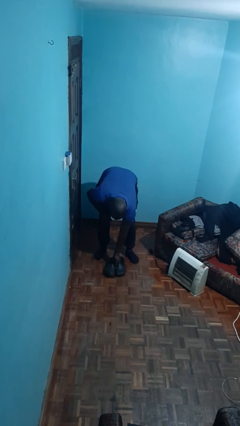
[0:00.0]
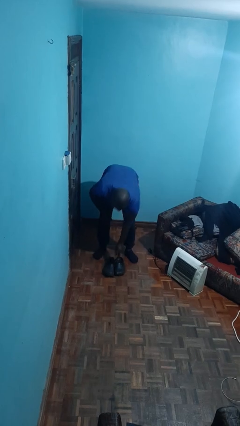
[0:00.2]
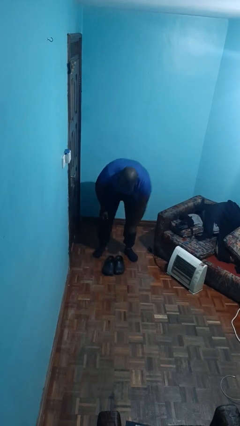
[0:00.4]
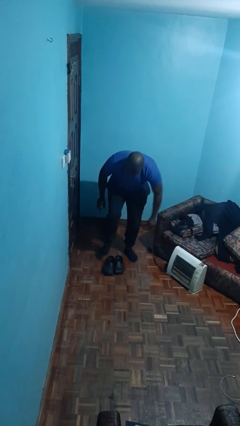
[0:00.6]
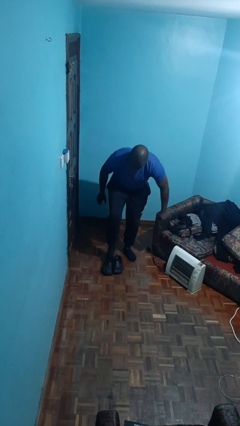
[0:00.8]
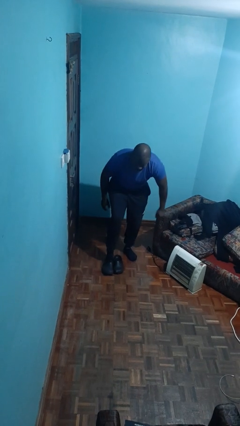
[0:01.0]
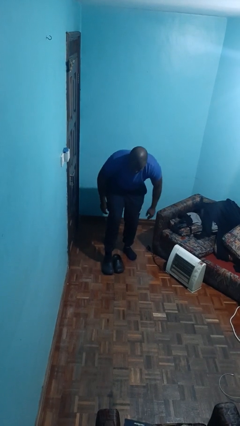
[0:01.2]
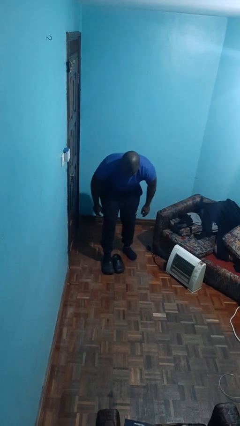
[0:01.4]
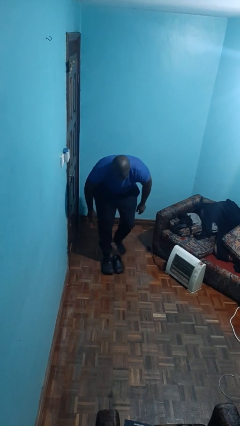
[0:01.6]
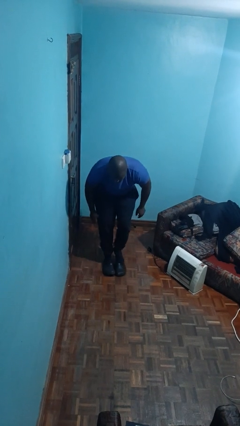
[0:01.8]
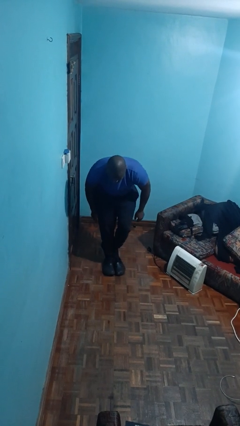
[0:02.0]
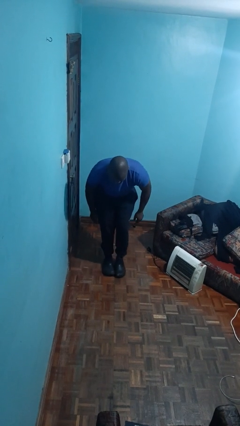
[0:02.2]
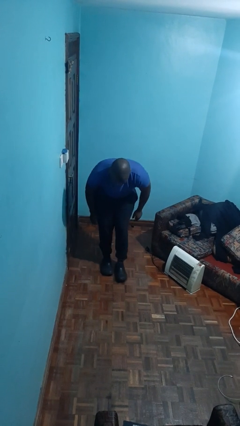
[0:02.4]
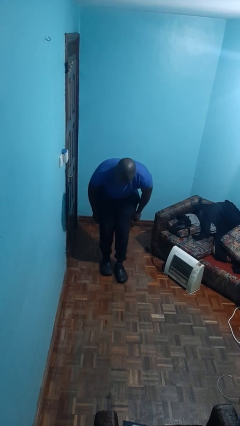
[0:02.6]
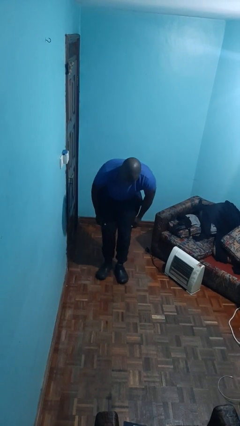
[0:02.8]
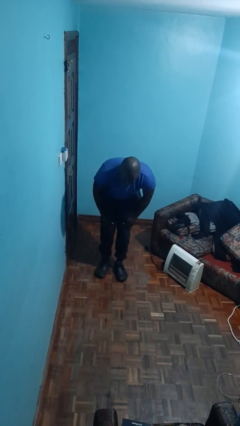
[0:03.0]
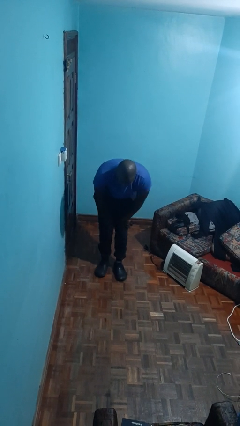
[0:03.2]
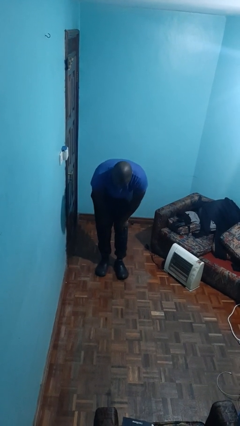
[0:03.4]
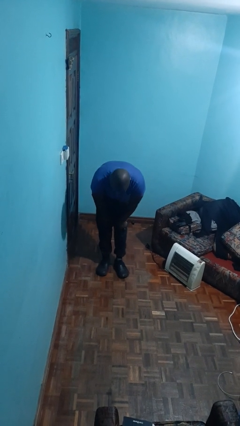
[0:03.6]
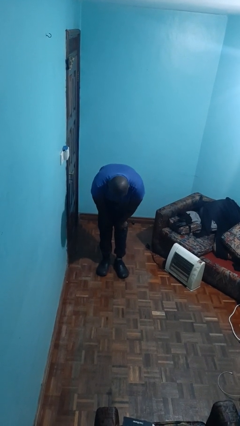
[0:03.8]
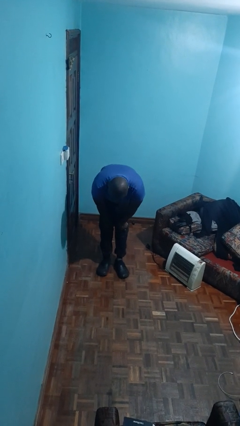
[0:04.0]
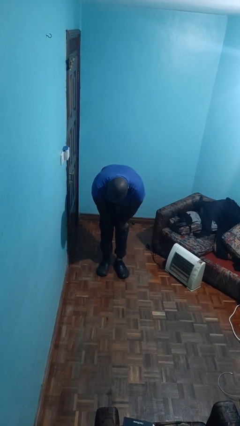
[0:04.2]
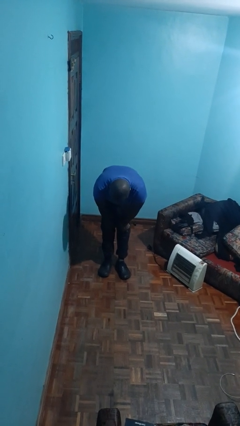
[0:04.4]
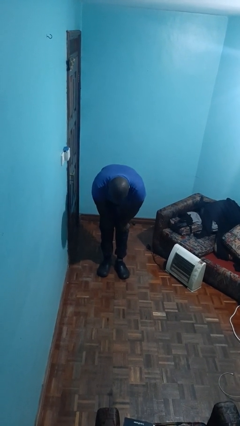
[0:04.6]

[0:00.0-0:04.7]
person puts on shoes

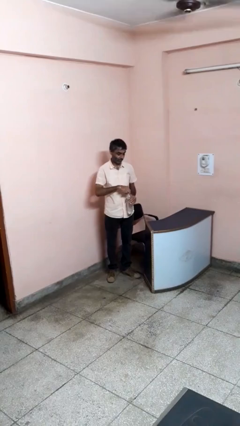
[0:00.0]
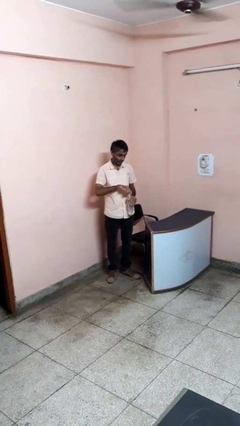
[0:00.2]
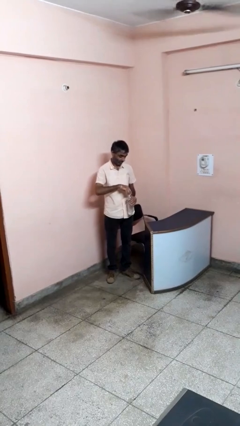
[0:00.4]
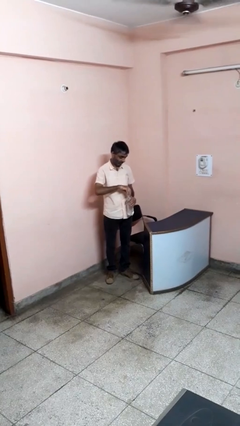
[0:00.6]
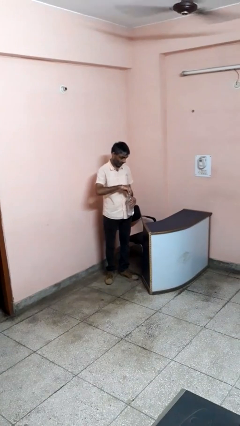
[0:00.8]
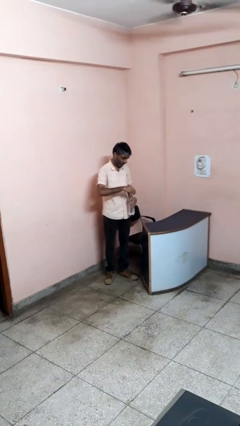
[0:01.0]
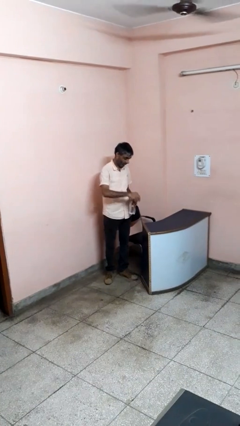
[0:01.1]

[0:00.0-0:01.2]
person unscrews lid from bottle

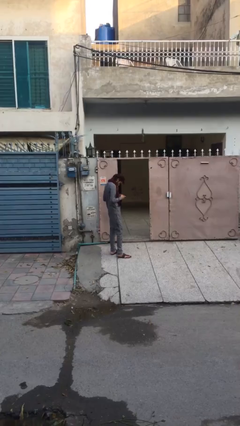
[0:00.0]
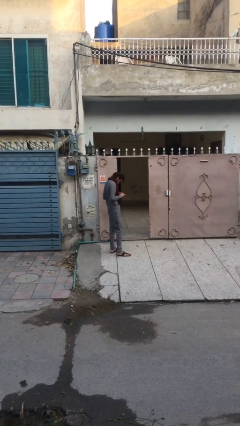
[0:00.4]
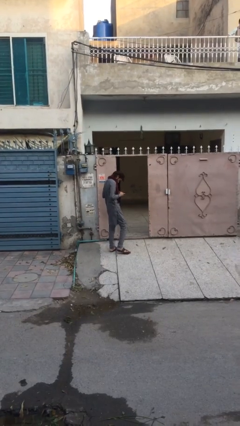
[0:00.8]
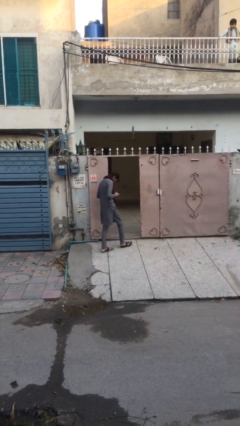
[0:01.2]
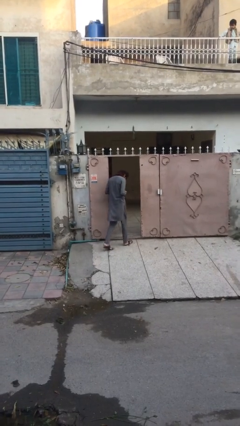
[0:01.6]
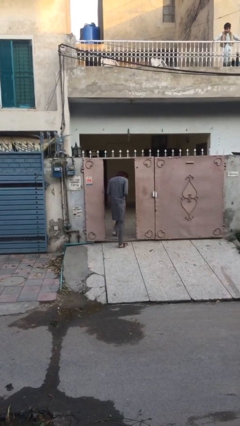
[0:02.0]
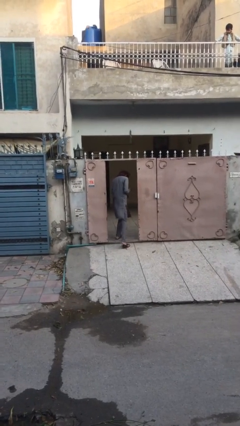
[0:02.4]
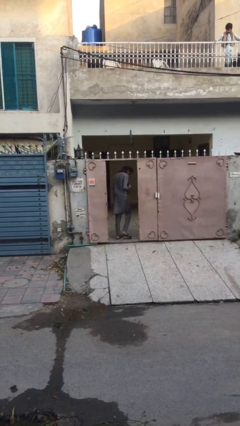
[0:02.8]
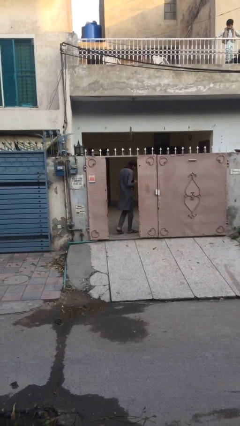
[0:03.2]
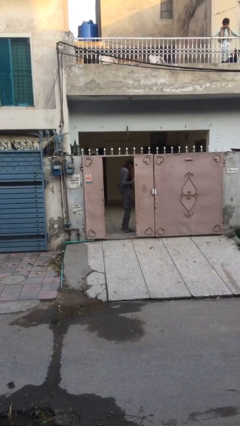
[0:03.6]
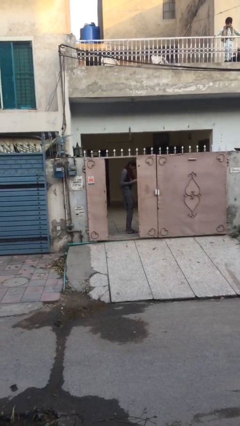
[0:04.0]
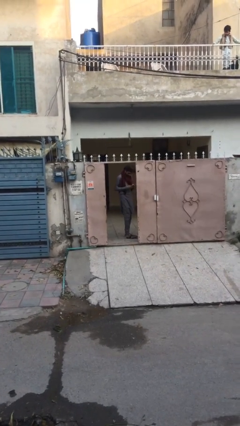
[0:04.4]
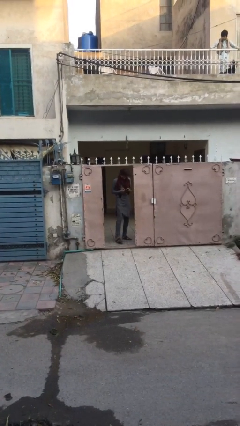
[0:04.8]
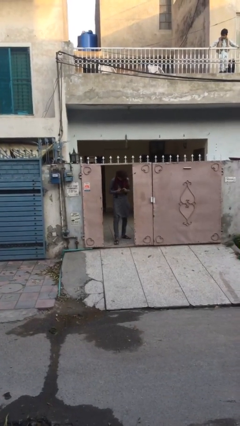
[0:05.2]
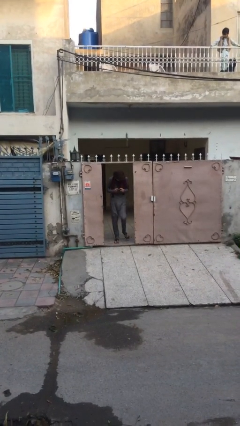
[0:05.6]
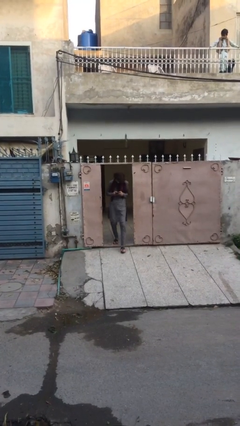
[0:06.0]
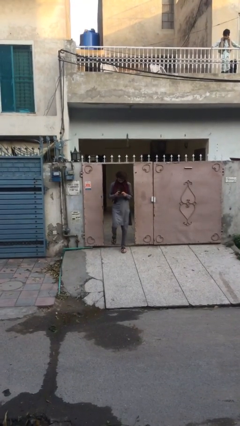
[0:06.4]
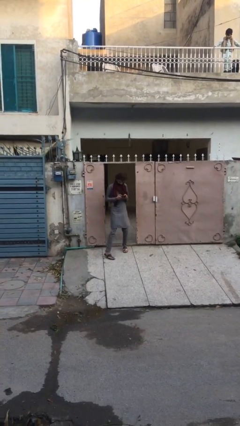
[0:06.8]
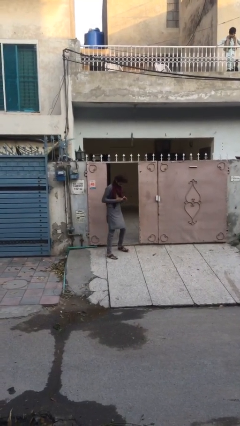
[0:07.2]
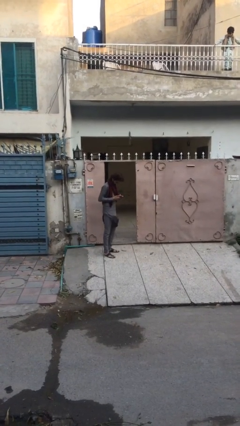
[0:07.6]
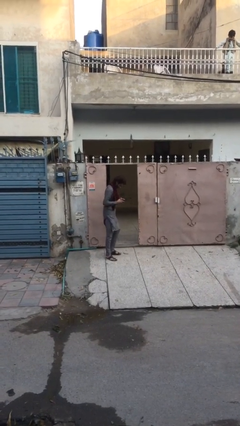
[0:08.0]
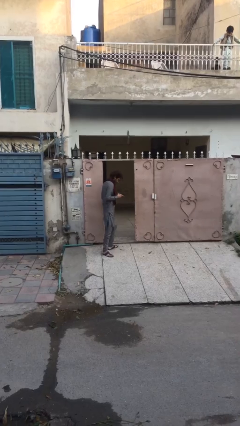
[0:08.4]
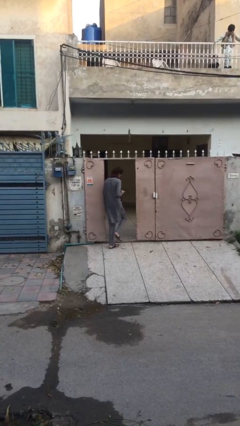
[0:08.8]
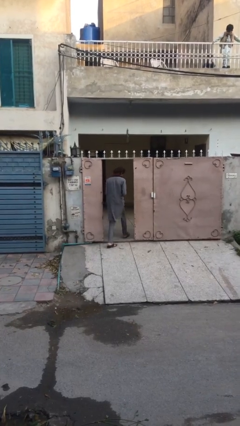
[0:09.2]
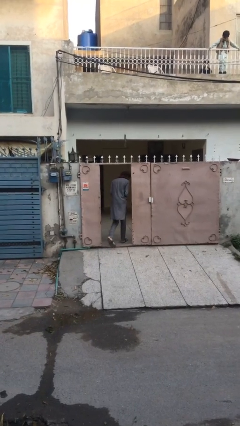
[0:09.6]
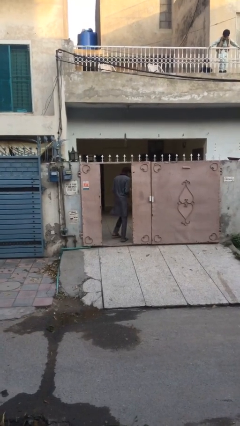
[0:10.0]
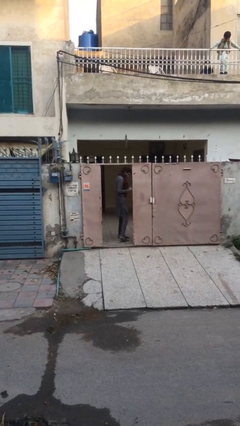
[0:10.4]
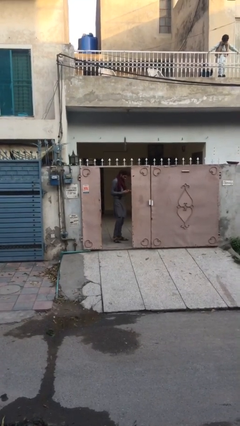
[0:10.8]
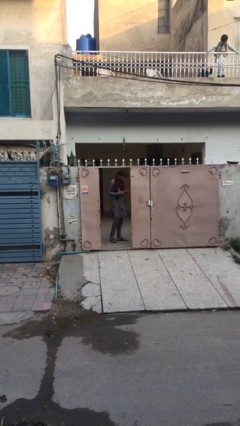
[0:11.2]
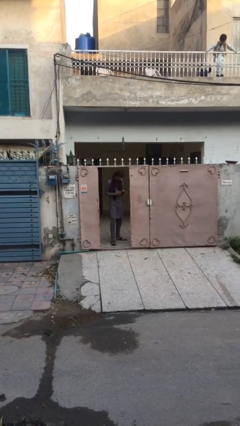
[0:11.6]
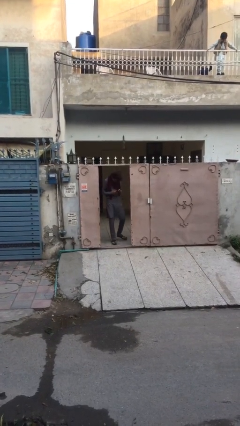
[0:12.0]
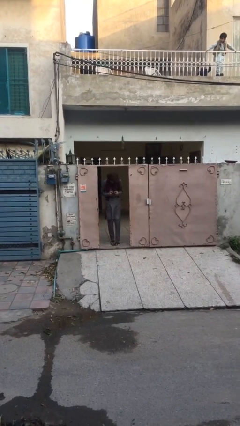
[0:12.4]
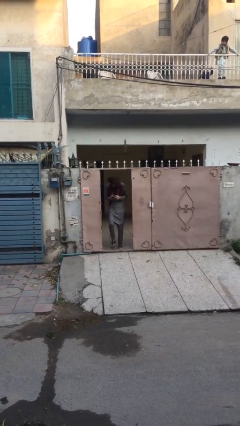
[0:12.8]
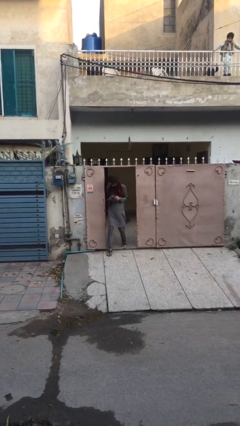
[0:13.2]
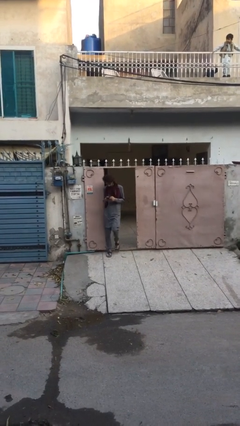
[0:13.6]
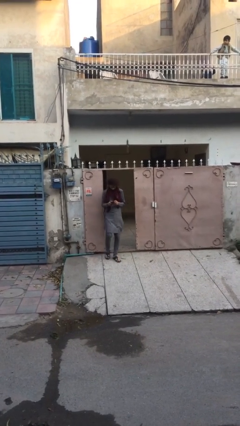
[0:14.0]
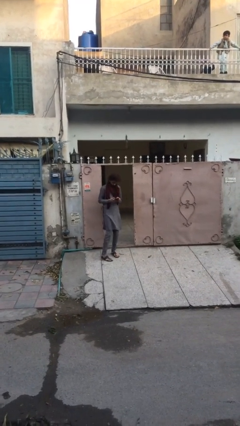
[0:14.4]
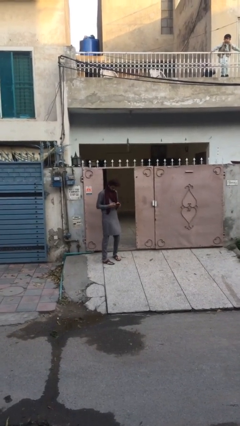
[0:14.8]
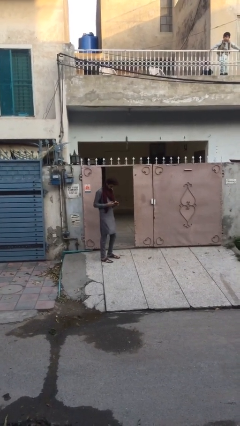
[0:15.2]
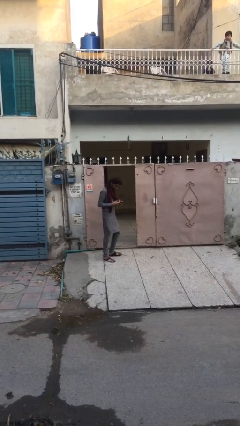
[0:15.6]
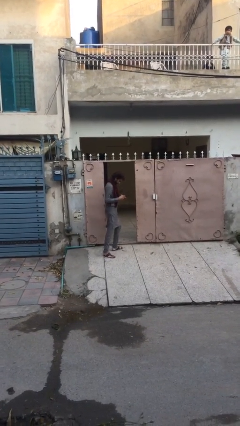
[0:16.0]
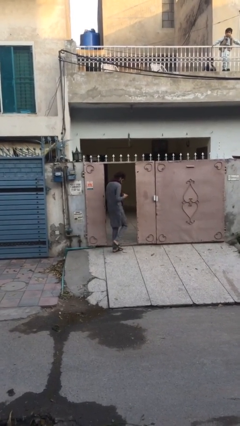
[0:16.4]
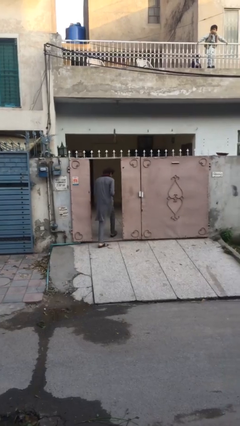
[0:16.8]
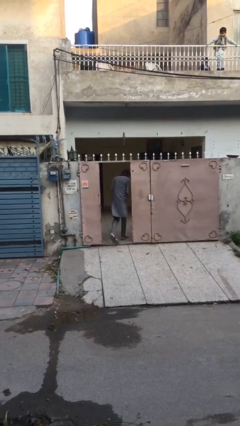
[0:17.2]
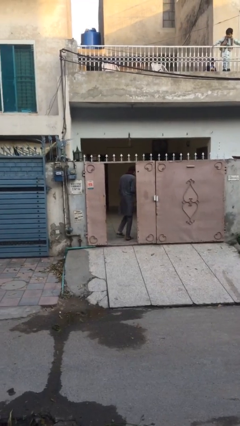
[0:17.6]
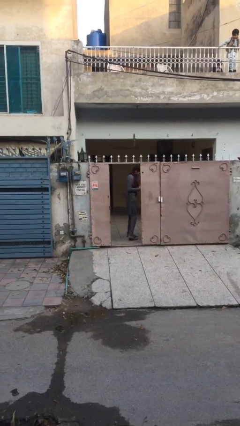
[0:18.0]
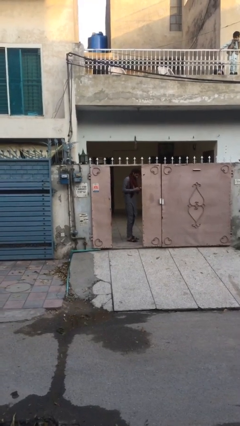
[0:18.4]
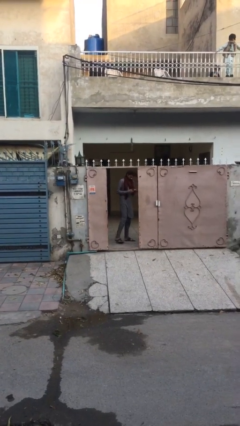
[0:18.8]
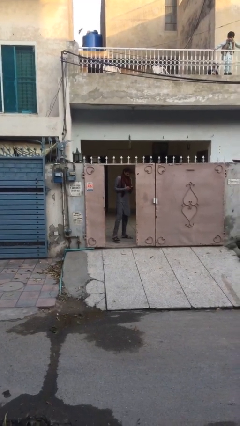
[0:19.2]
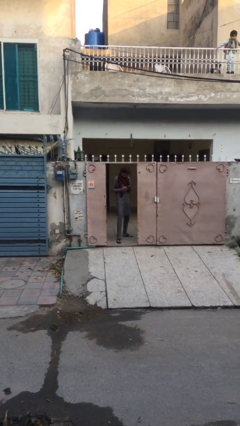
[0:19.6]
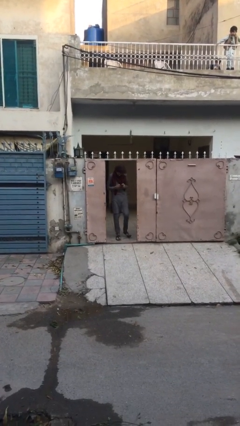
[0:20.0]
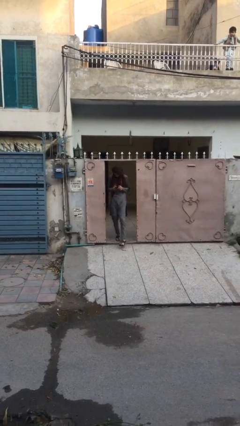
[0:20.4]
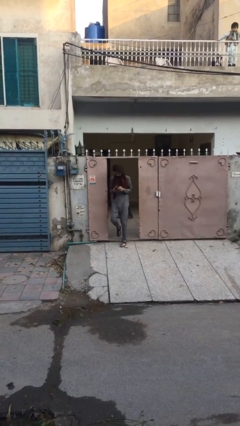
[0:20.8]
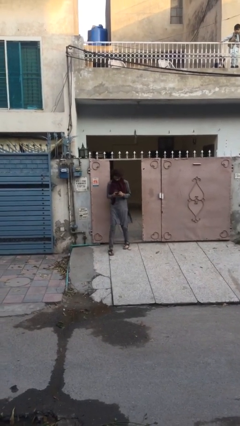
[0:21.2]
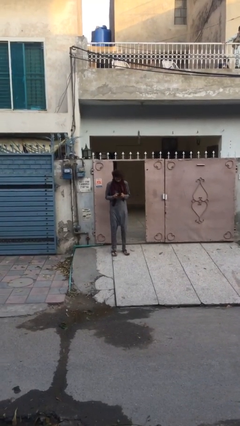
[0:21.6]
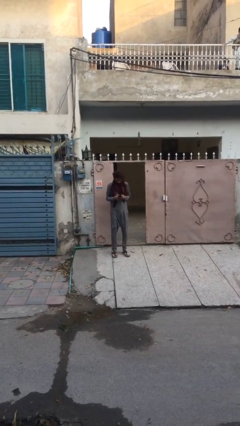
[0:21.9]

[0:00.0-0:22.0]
person texts on phone

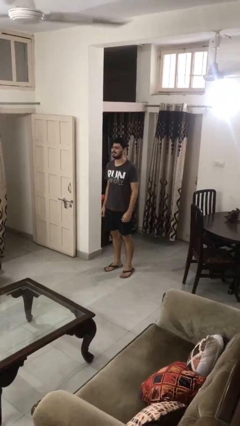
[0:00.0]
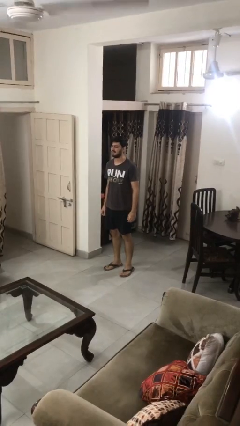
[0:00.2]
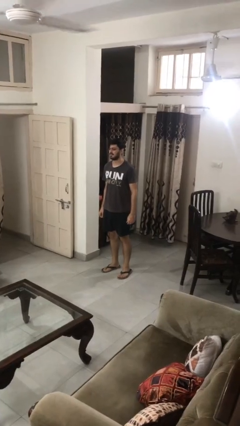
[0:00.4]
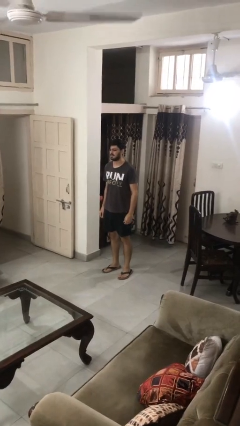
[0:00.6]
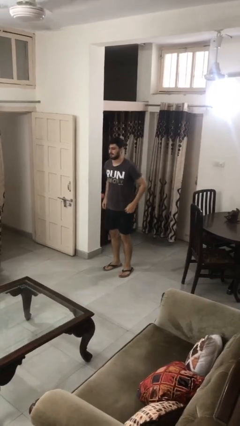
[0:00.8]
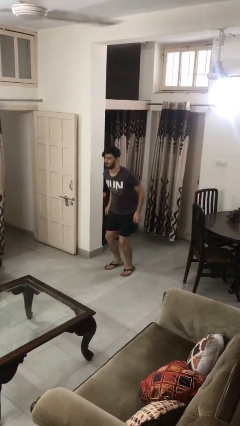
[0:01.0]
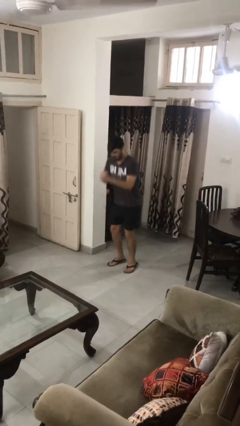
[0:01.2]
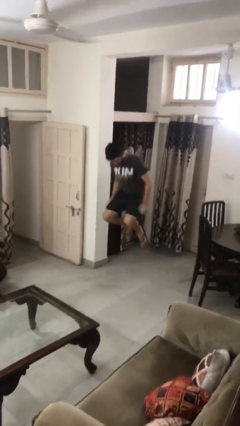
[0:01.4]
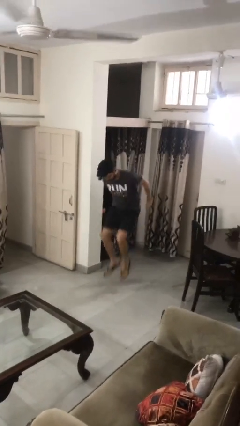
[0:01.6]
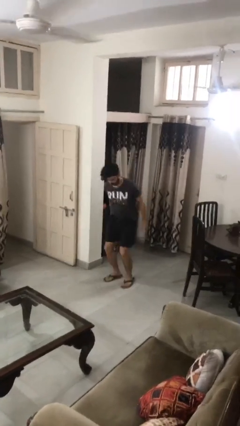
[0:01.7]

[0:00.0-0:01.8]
person jumps
